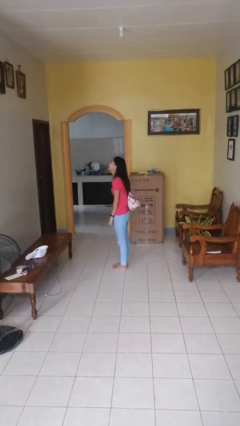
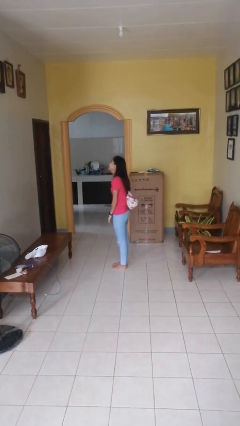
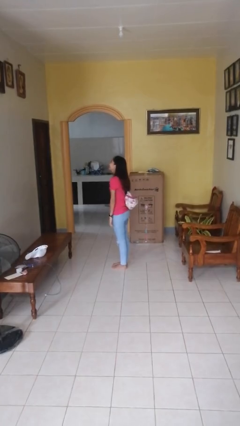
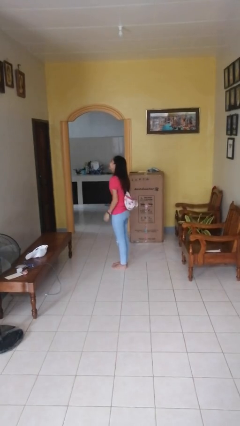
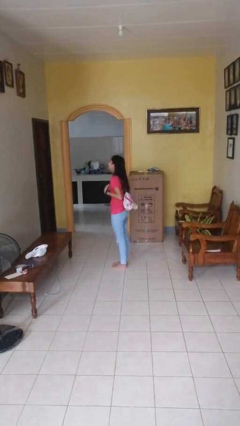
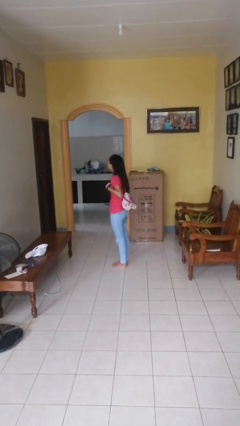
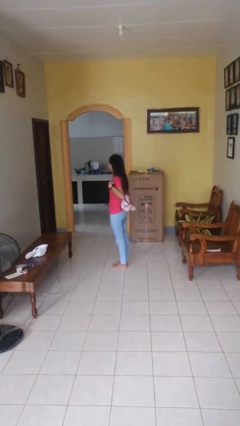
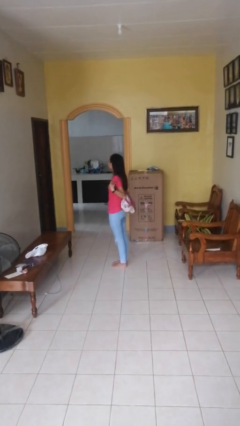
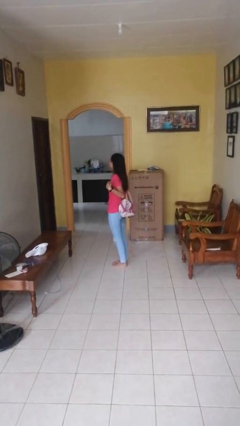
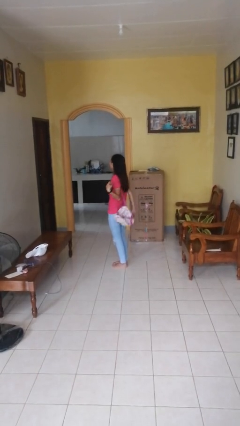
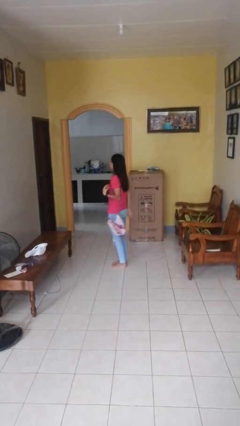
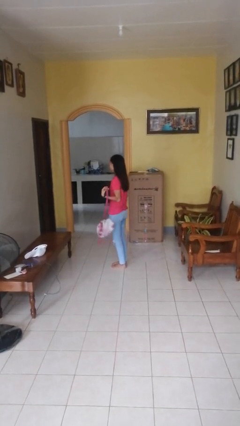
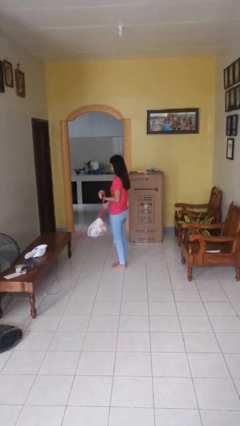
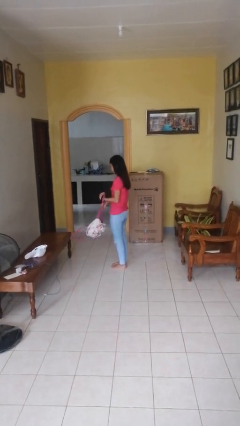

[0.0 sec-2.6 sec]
person takes off backpack

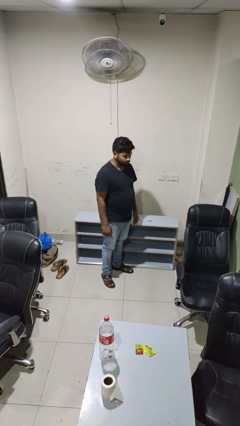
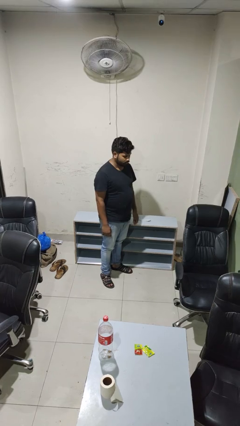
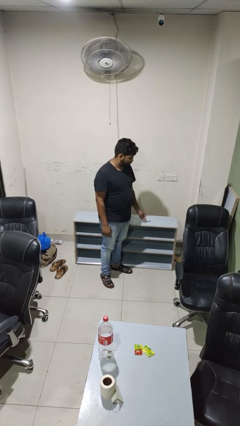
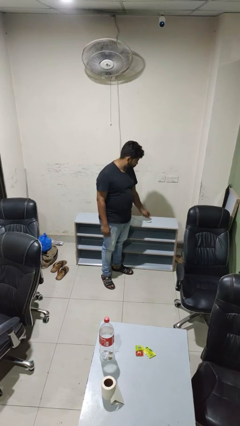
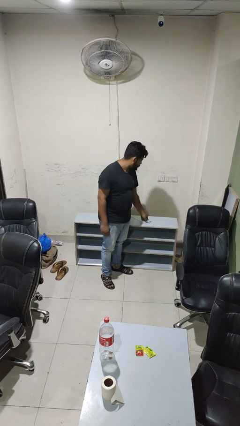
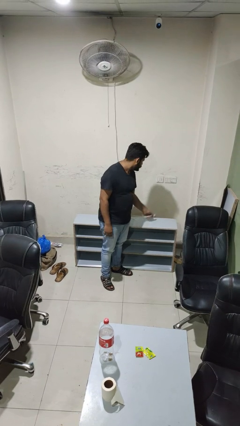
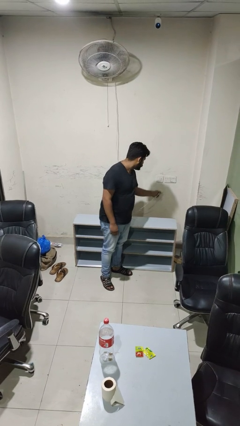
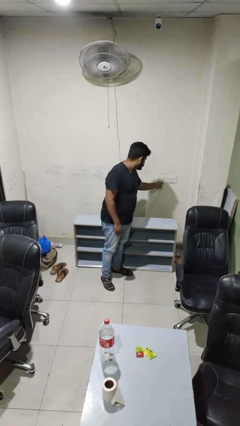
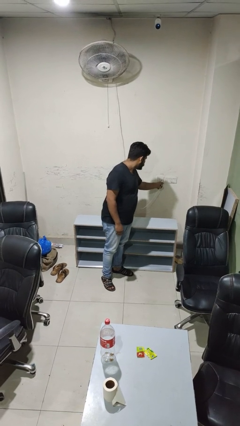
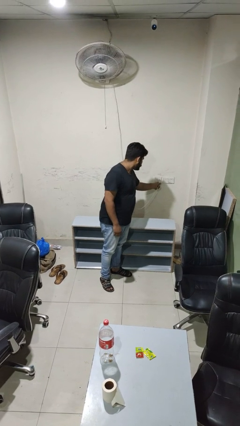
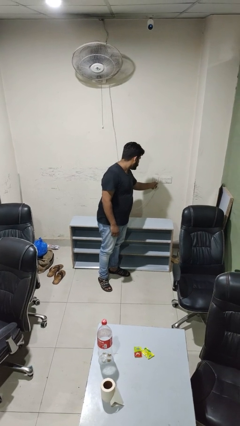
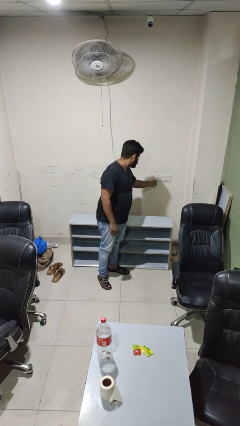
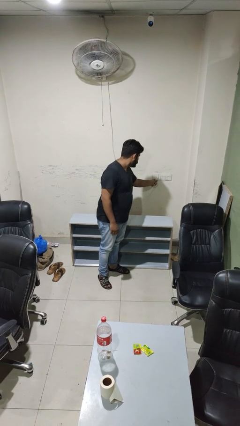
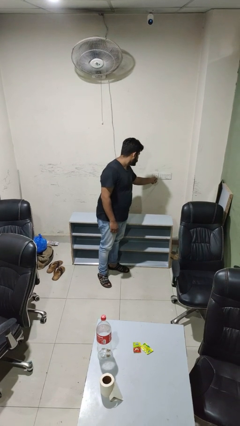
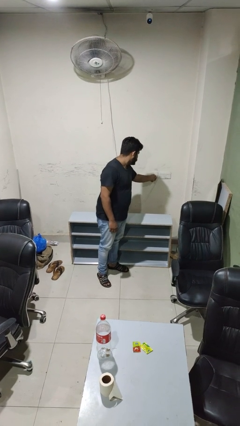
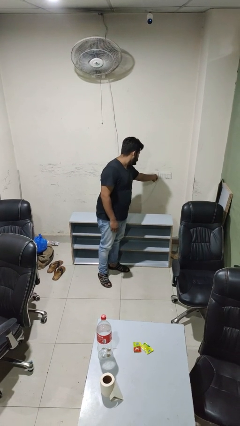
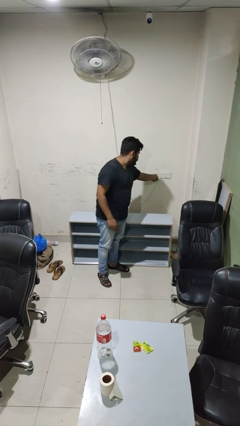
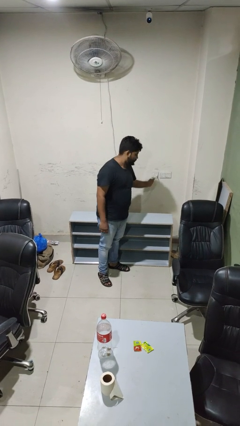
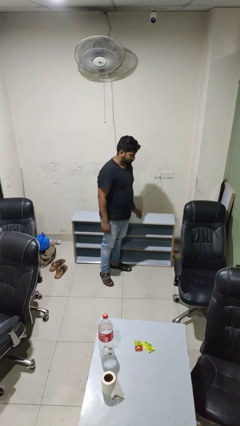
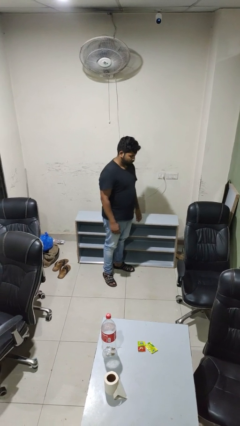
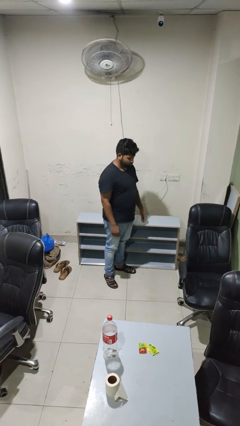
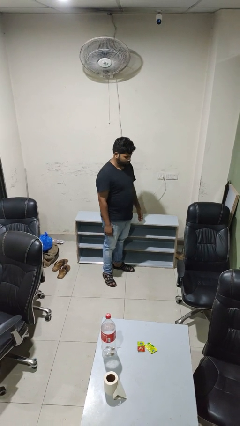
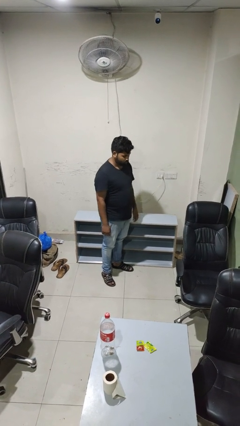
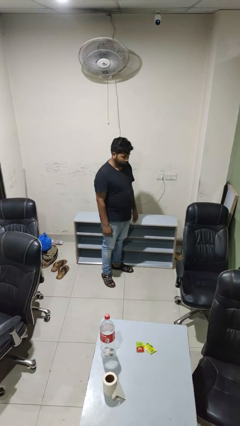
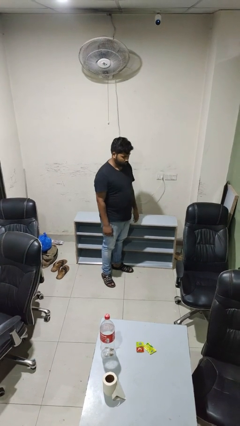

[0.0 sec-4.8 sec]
person plugs into electrical socket

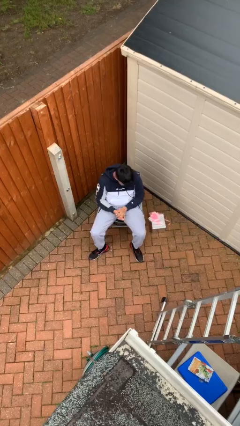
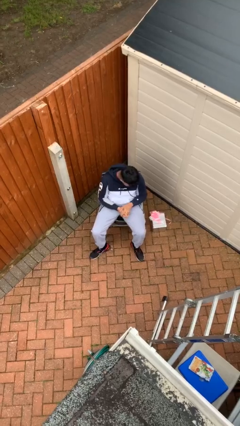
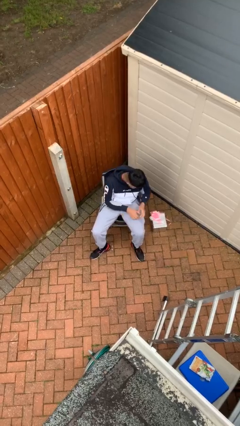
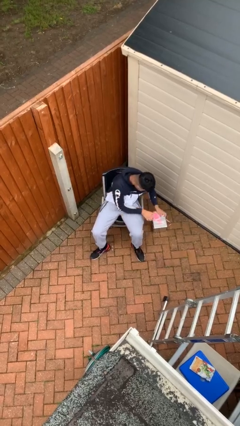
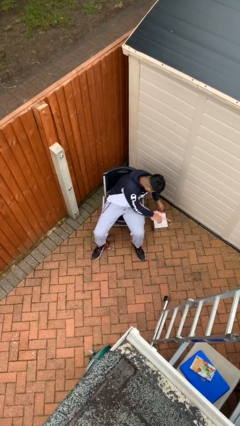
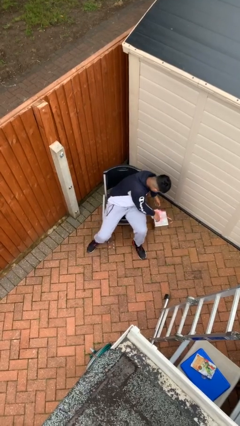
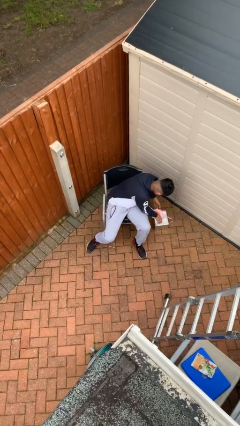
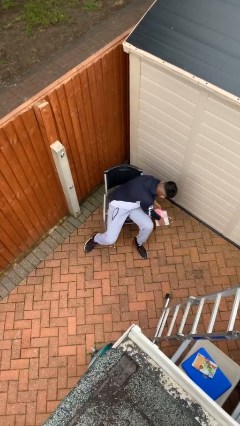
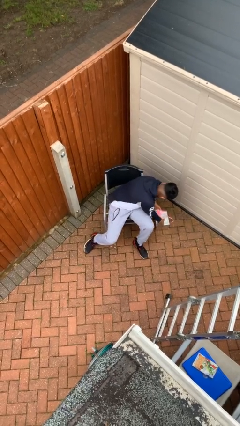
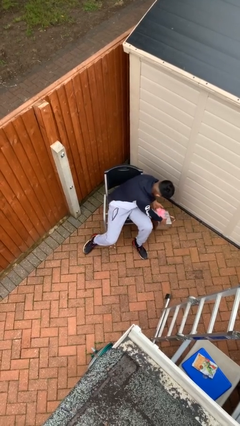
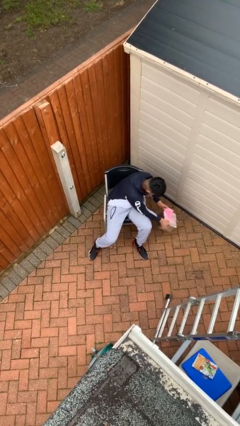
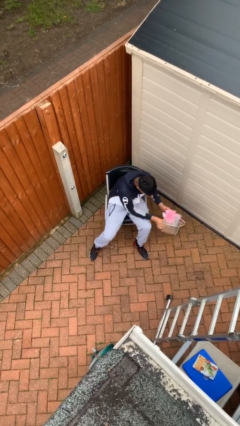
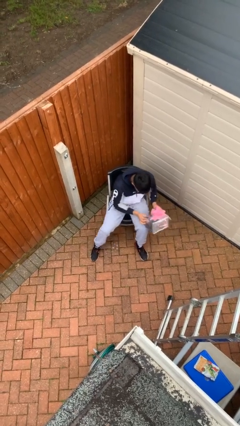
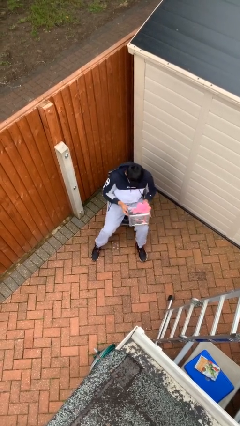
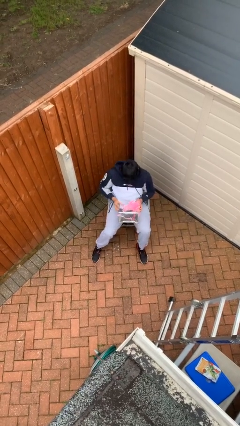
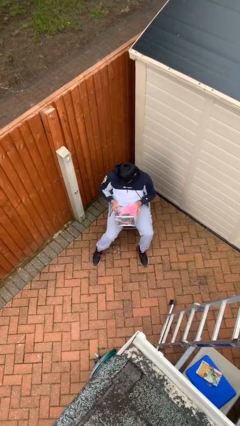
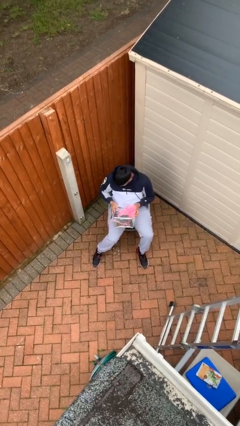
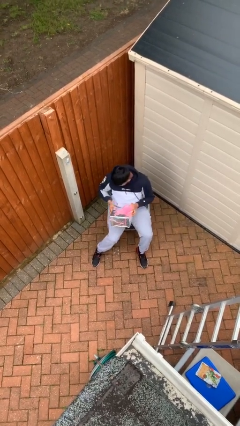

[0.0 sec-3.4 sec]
person picks up object from floor

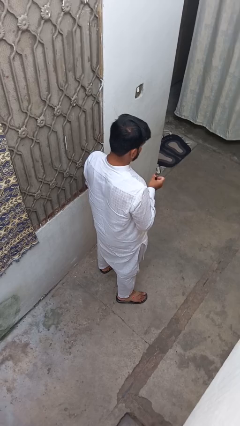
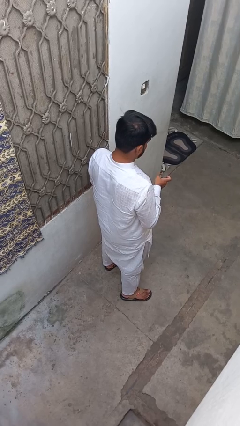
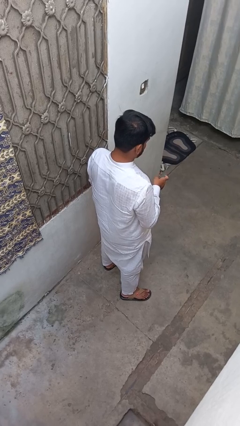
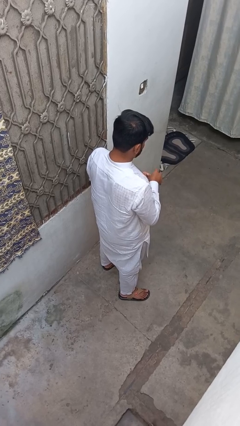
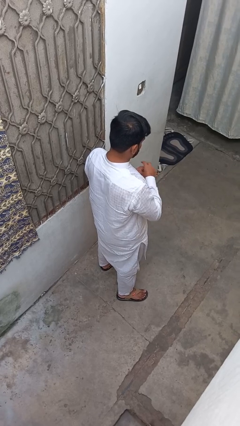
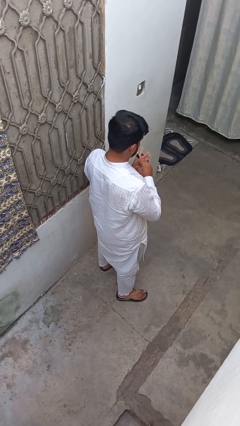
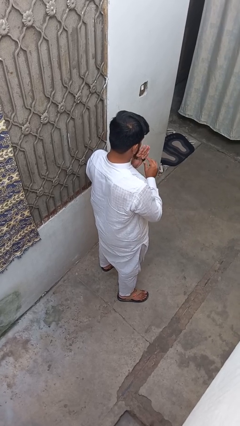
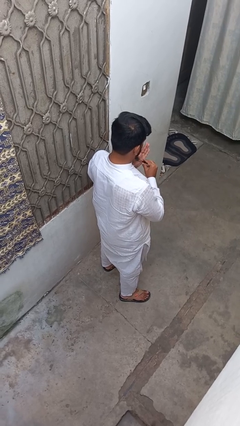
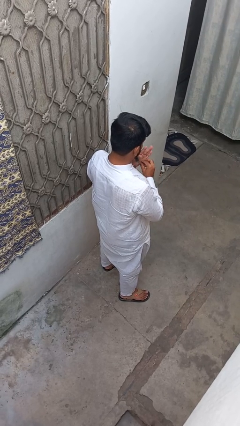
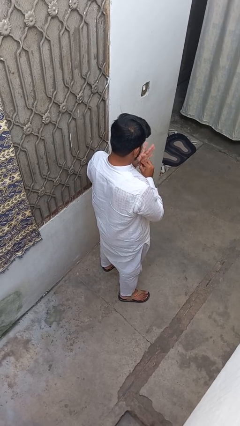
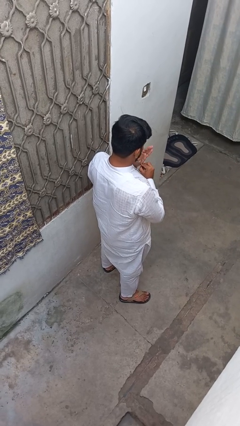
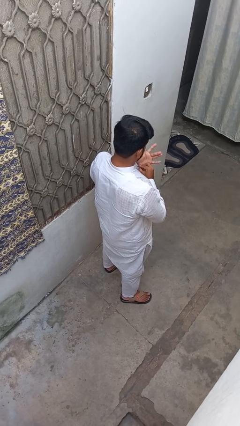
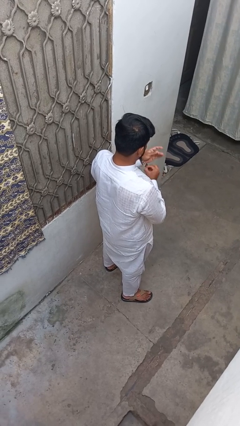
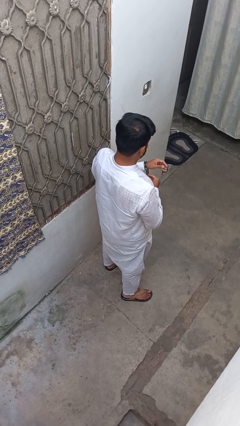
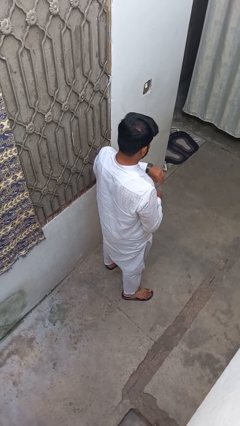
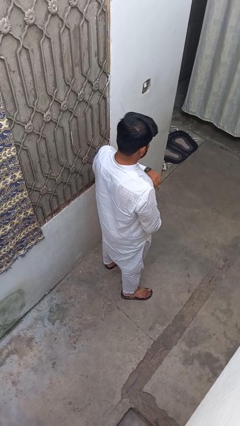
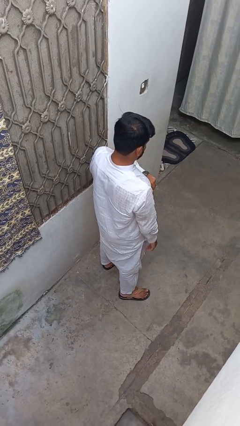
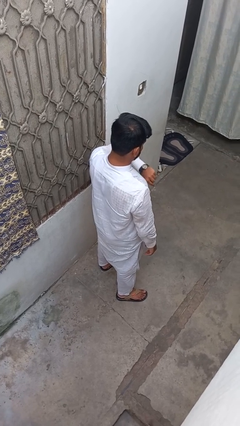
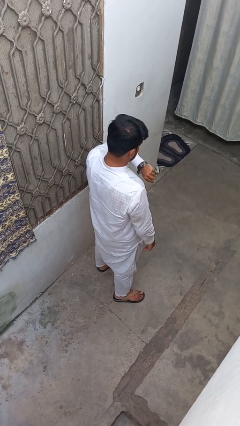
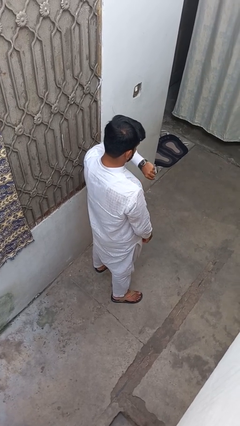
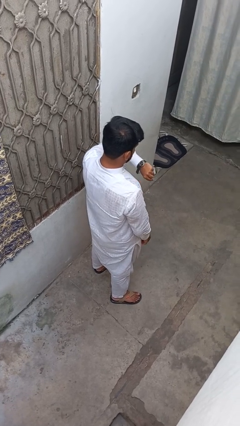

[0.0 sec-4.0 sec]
person puts on wristwatch

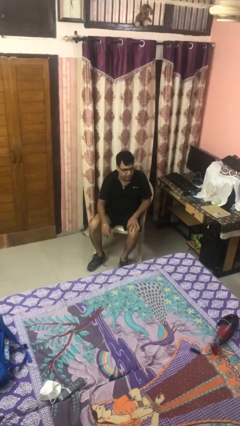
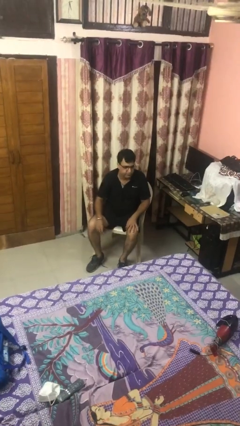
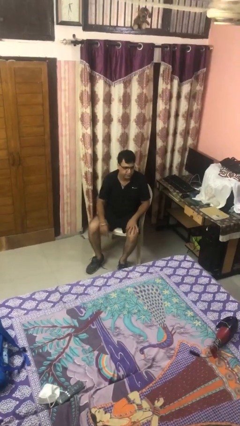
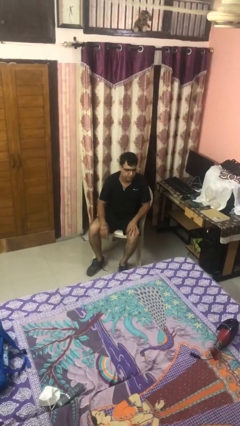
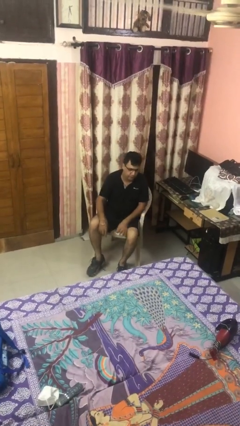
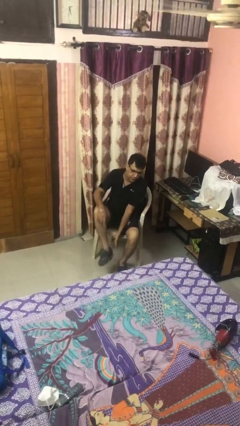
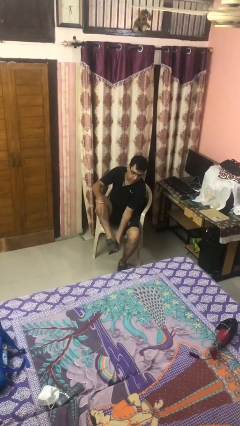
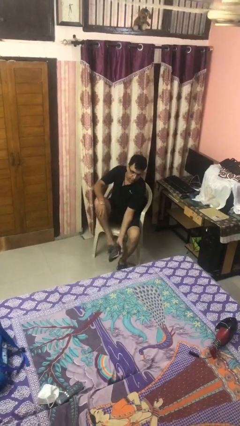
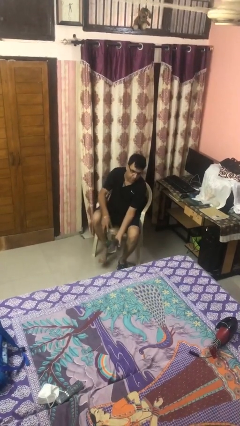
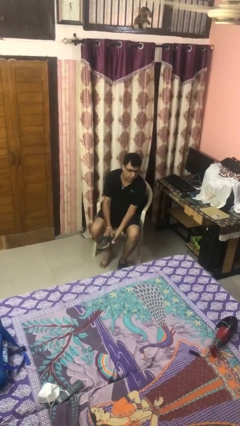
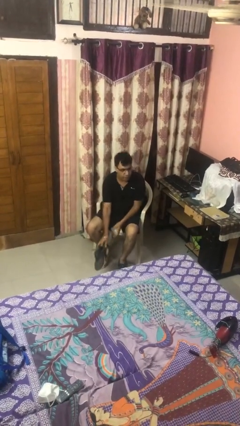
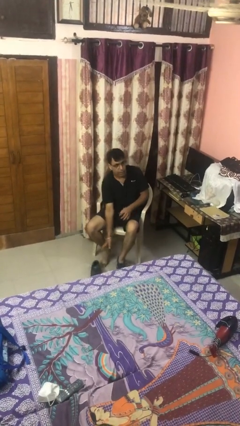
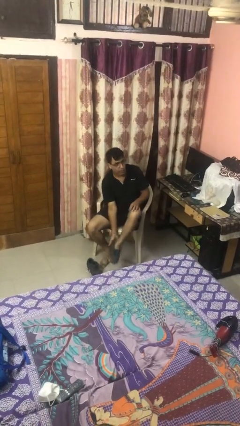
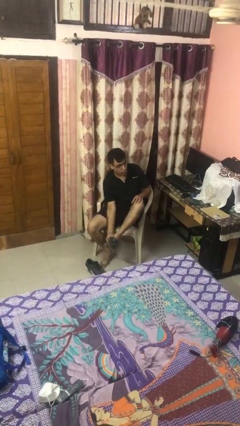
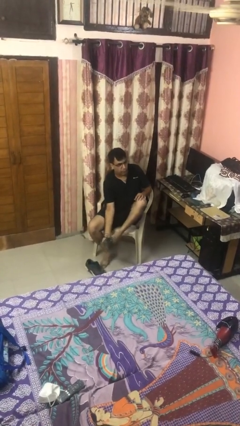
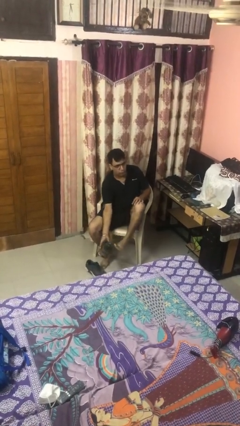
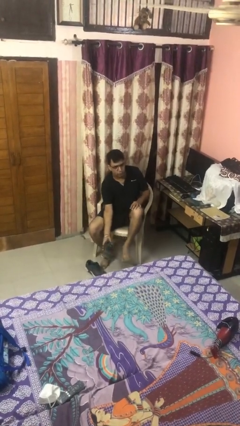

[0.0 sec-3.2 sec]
person takes off shoes
